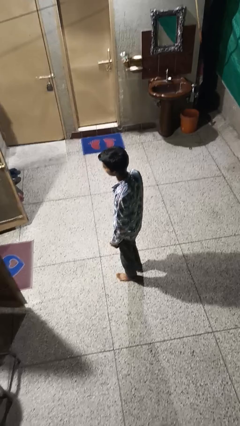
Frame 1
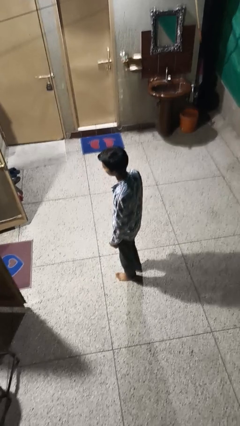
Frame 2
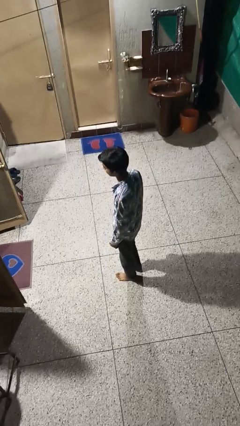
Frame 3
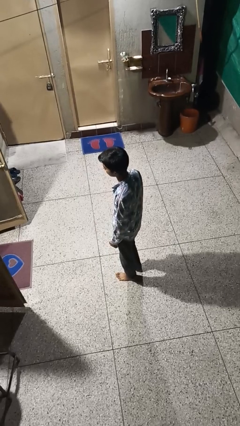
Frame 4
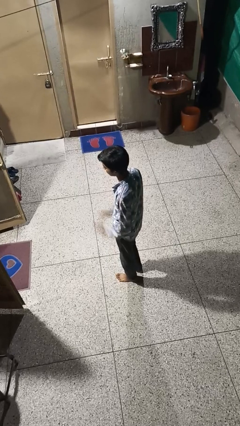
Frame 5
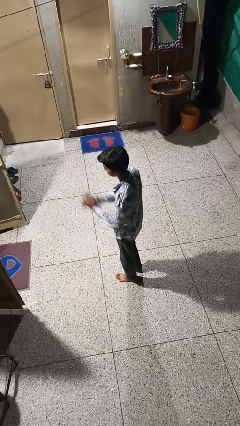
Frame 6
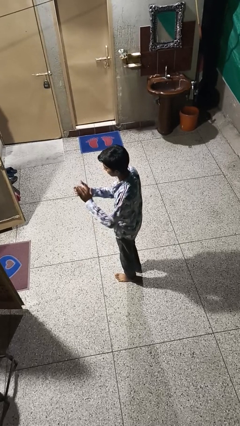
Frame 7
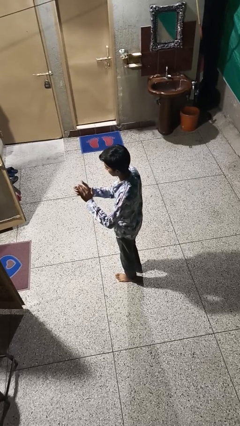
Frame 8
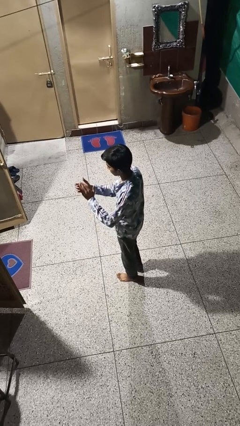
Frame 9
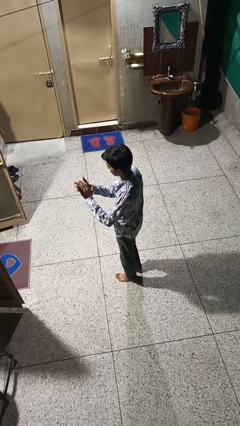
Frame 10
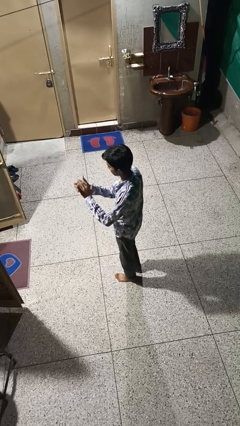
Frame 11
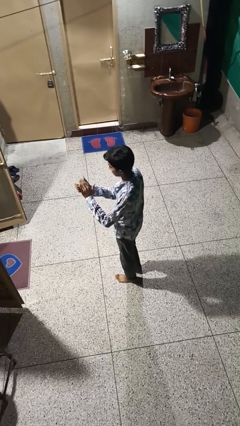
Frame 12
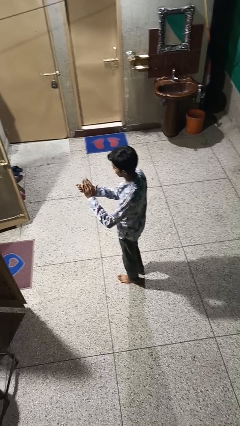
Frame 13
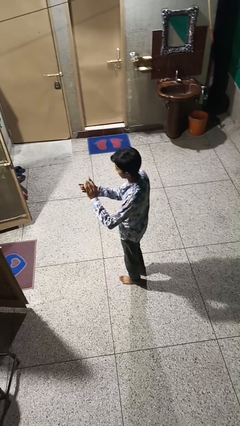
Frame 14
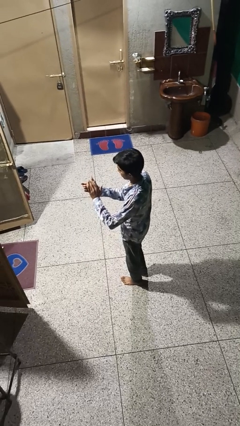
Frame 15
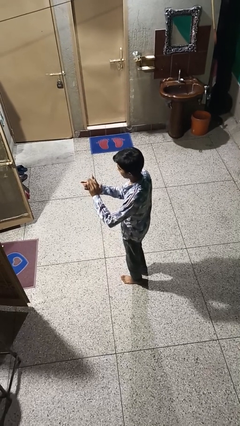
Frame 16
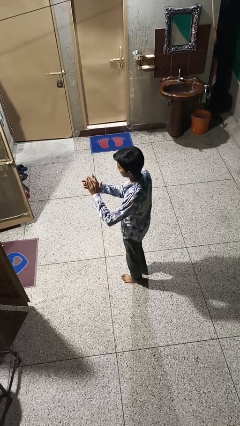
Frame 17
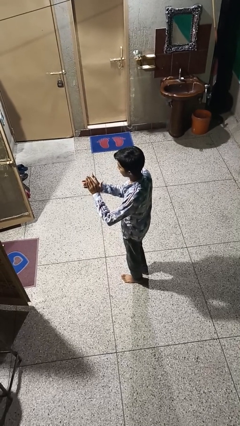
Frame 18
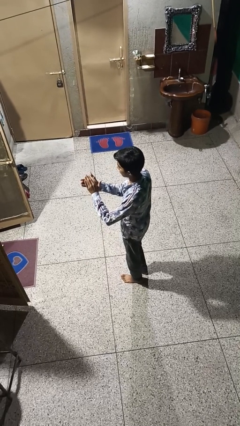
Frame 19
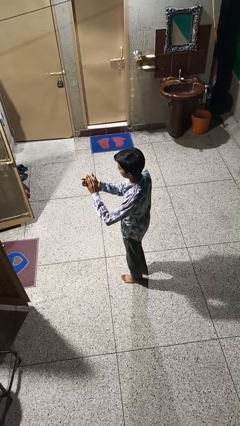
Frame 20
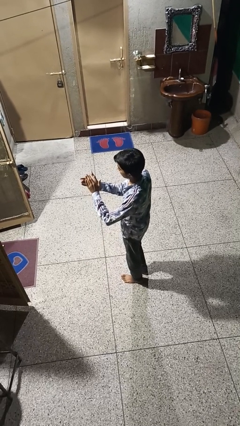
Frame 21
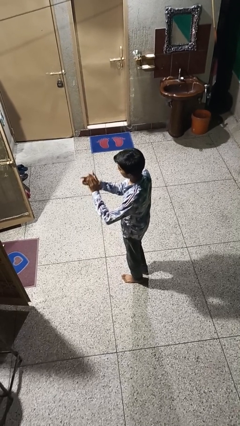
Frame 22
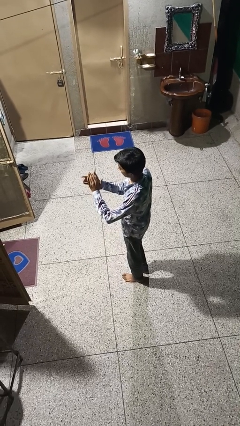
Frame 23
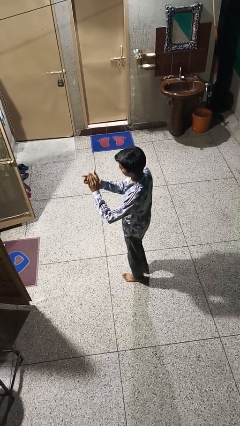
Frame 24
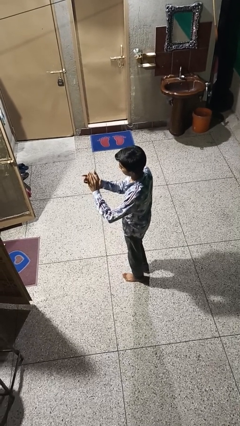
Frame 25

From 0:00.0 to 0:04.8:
person claps hands

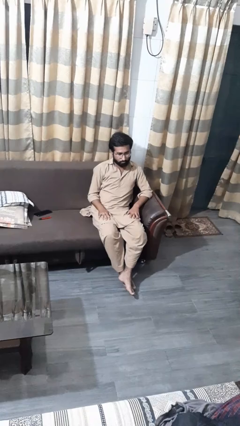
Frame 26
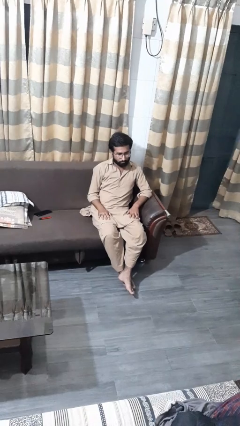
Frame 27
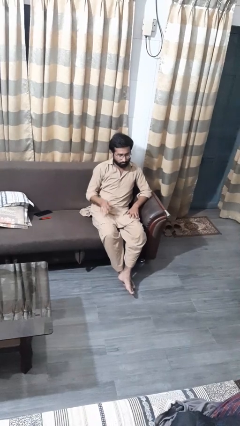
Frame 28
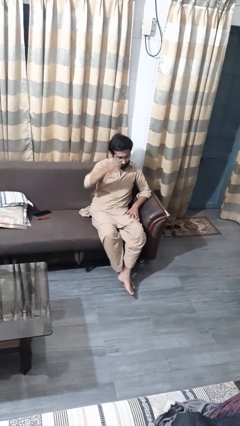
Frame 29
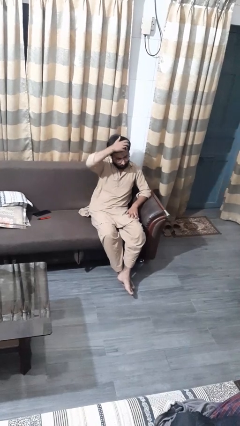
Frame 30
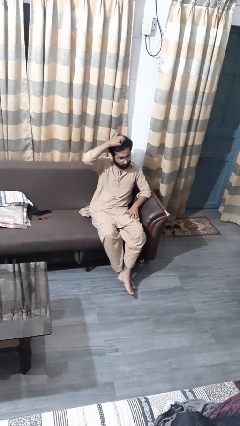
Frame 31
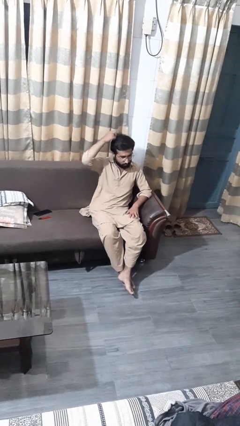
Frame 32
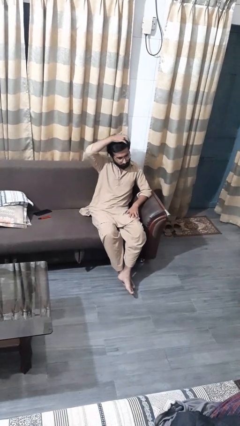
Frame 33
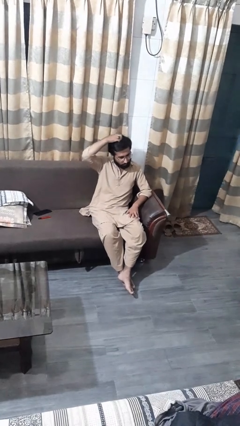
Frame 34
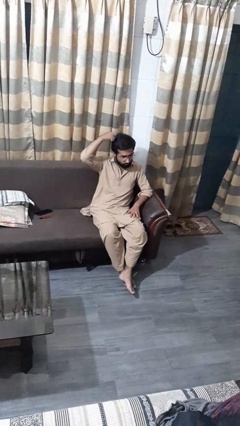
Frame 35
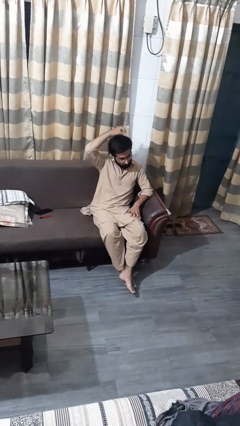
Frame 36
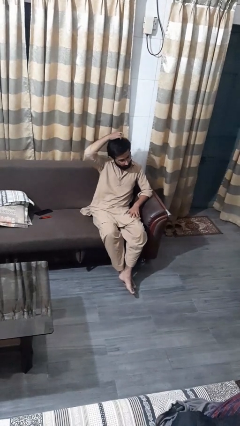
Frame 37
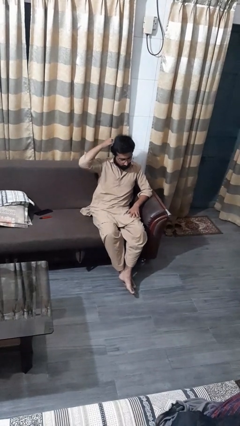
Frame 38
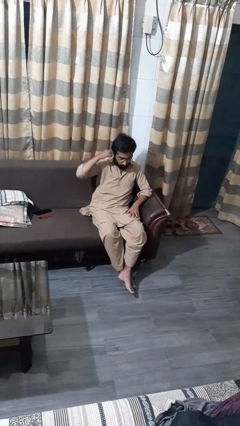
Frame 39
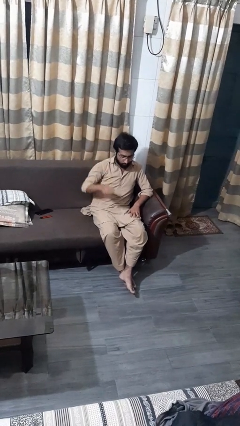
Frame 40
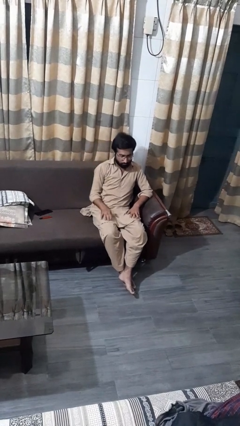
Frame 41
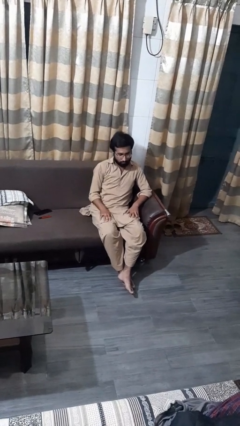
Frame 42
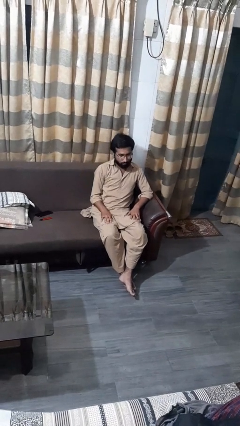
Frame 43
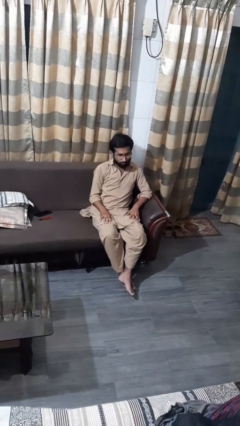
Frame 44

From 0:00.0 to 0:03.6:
person strokes hair

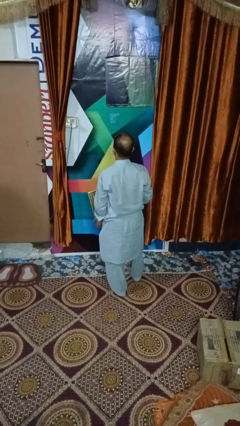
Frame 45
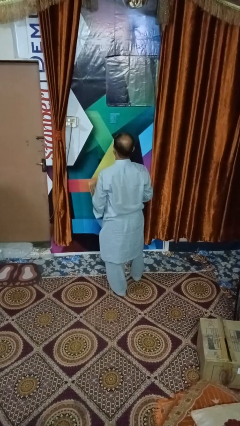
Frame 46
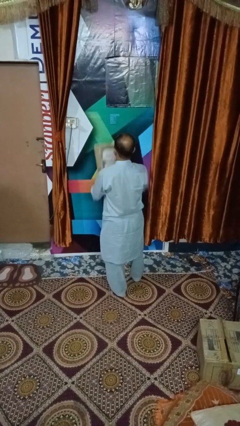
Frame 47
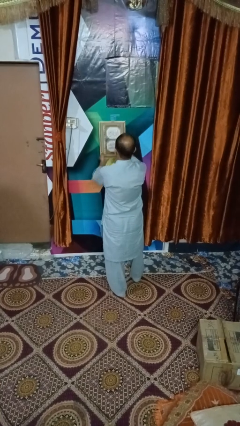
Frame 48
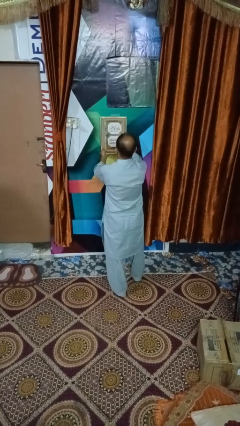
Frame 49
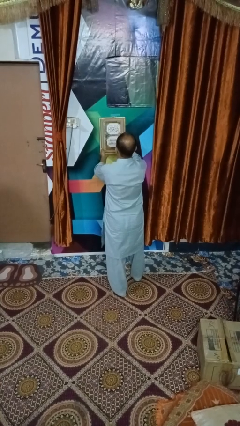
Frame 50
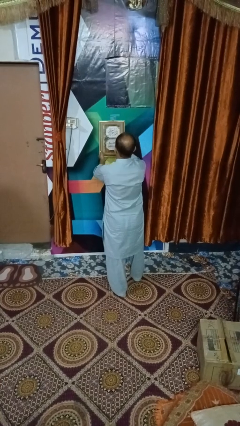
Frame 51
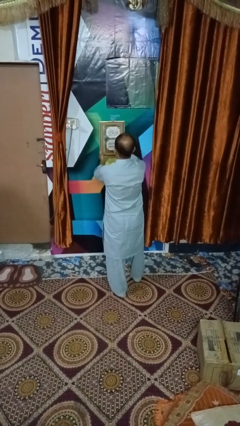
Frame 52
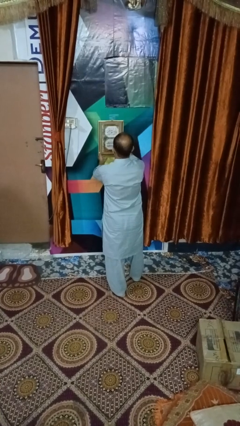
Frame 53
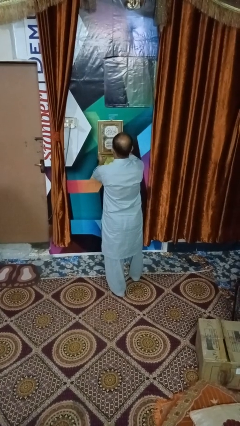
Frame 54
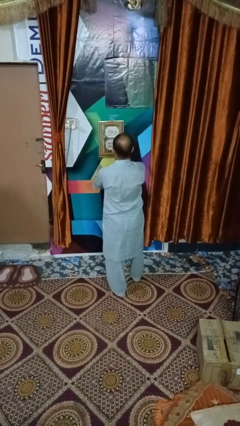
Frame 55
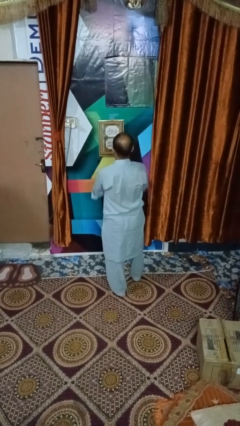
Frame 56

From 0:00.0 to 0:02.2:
person puts up picture frame

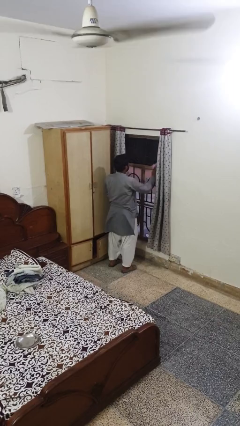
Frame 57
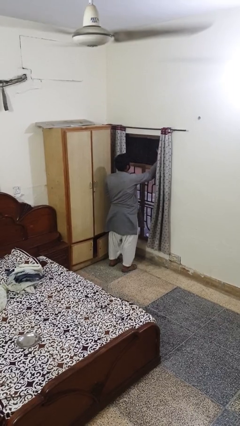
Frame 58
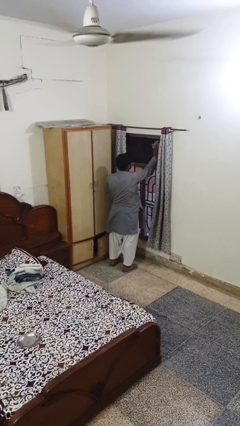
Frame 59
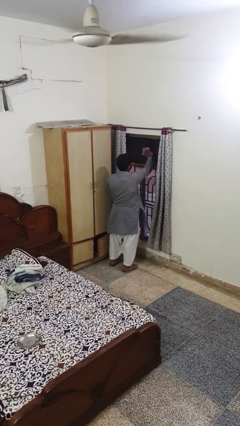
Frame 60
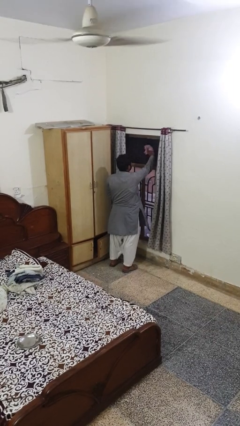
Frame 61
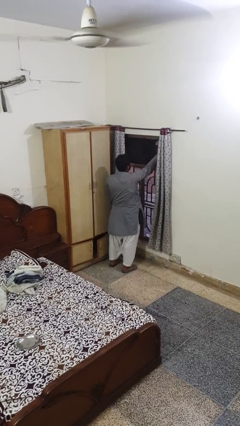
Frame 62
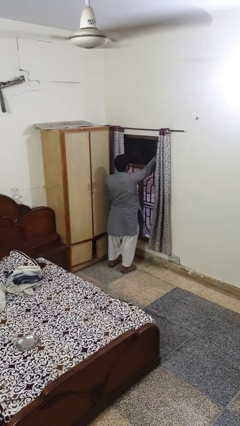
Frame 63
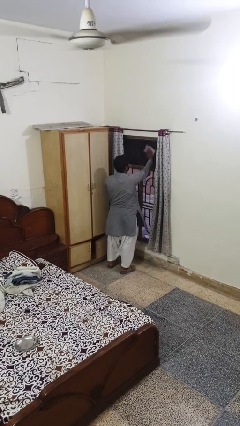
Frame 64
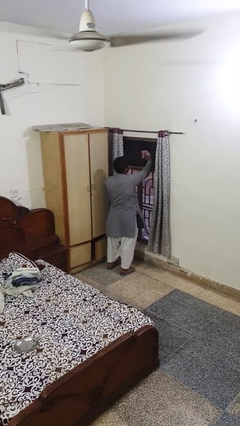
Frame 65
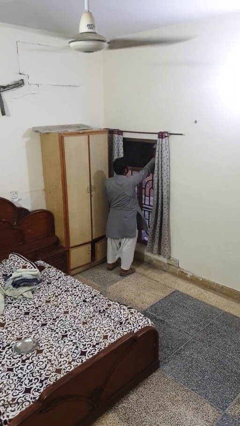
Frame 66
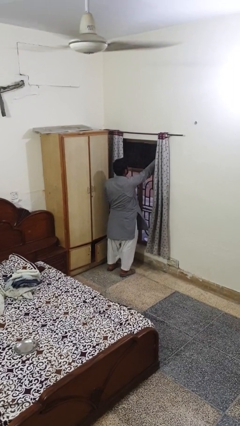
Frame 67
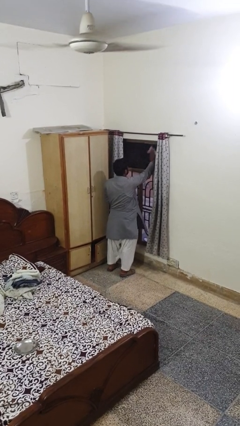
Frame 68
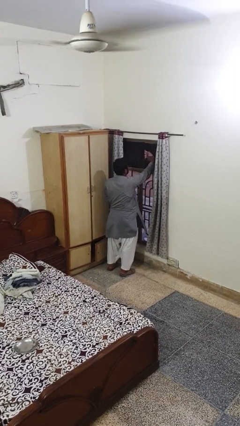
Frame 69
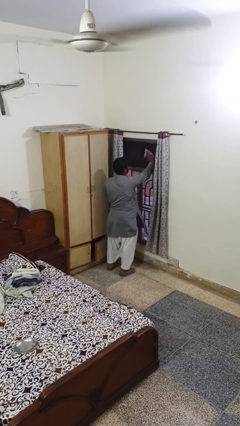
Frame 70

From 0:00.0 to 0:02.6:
person washes window

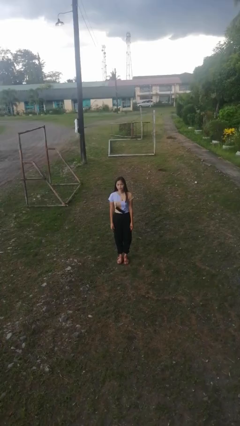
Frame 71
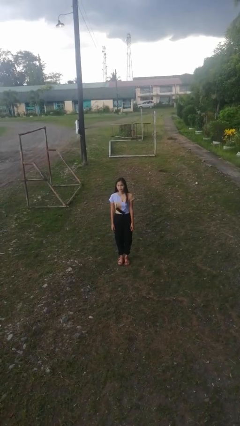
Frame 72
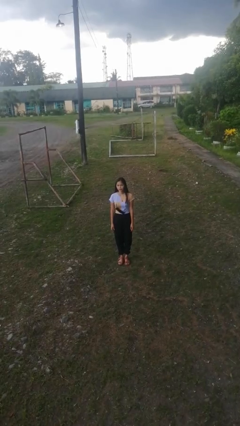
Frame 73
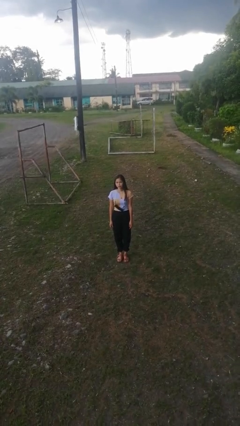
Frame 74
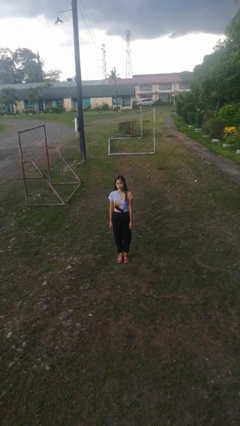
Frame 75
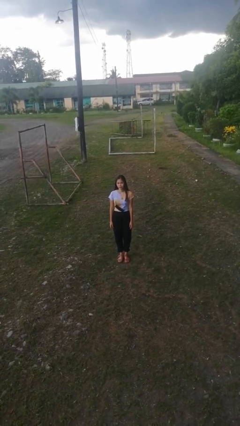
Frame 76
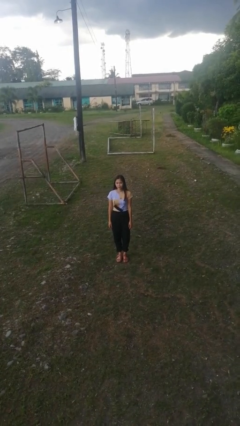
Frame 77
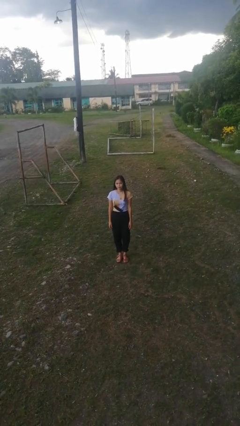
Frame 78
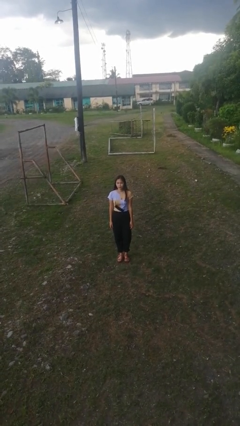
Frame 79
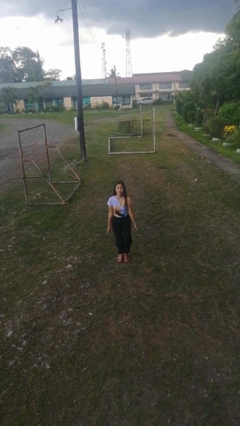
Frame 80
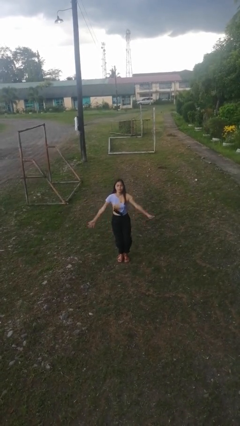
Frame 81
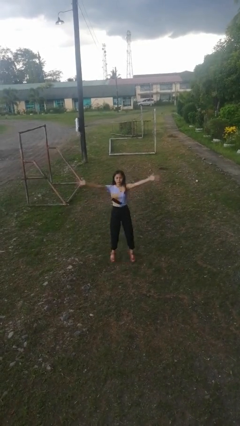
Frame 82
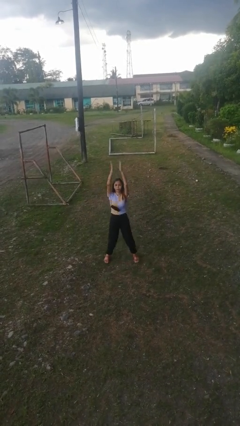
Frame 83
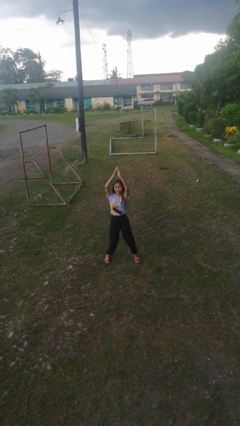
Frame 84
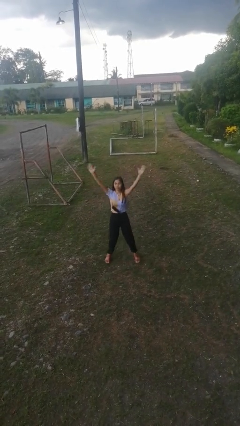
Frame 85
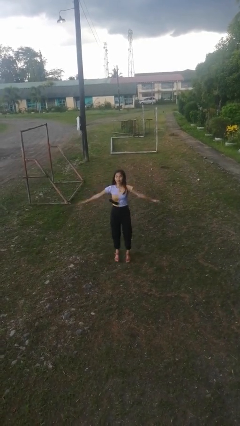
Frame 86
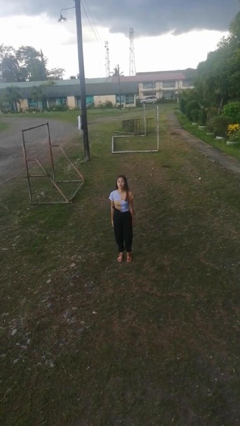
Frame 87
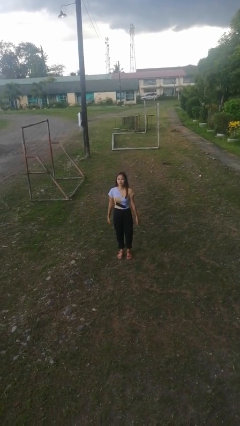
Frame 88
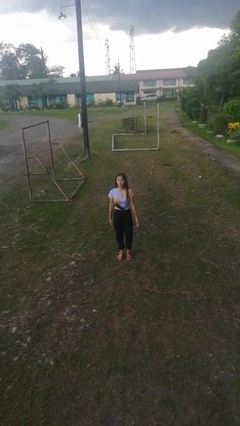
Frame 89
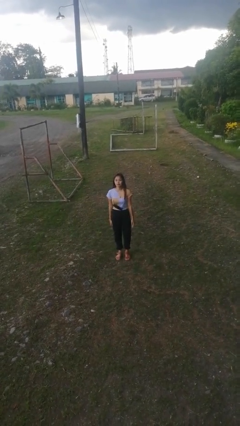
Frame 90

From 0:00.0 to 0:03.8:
person exercises with jumping jacks

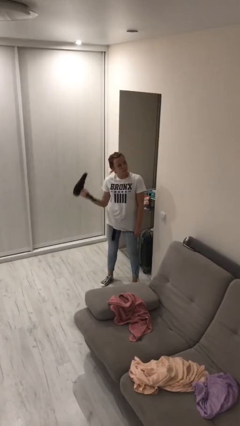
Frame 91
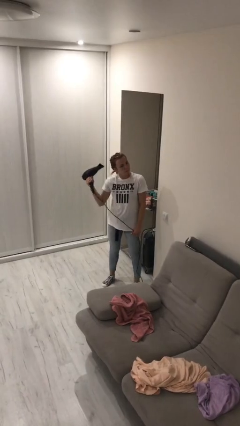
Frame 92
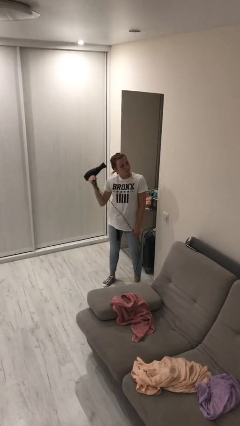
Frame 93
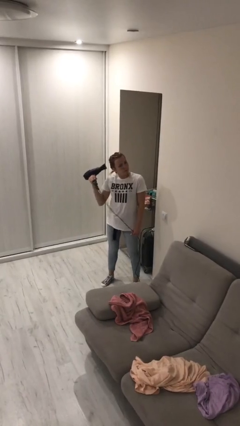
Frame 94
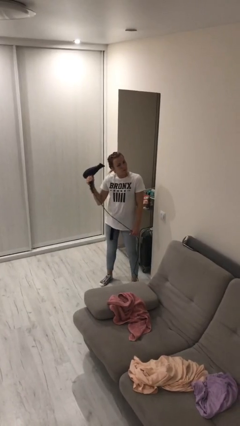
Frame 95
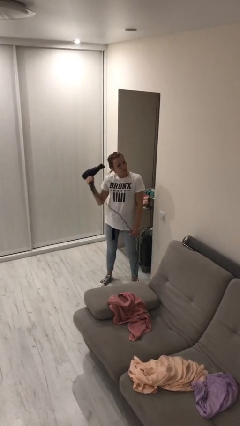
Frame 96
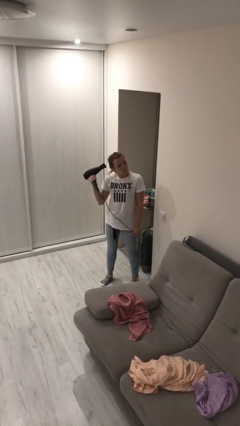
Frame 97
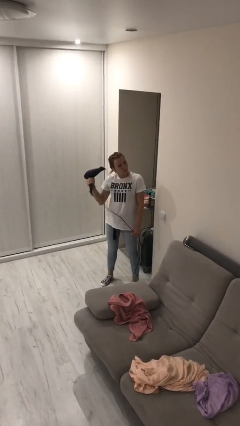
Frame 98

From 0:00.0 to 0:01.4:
person dries hair with hairdryer
